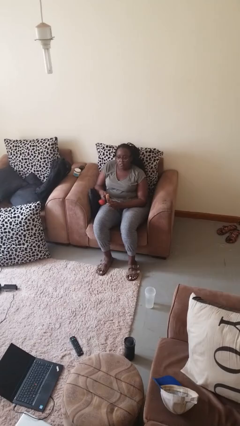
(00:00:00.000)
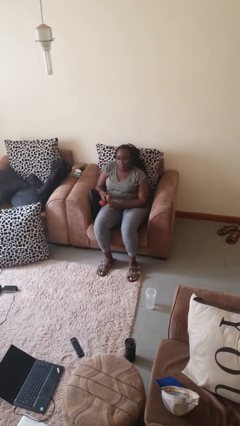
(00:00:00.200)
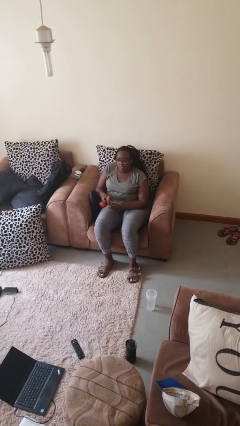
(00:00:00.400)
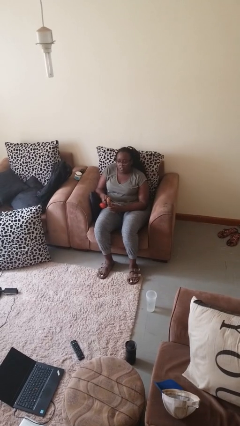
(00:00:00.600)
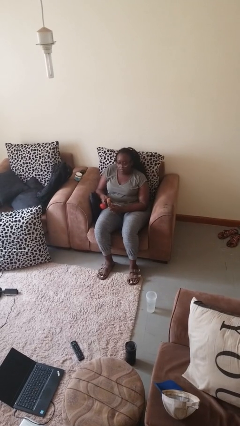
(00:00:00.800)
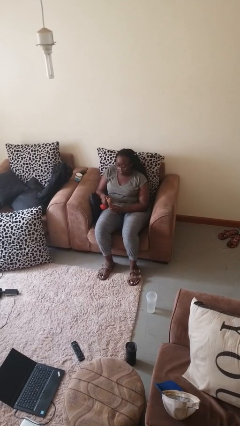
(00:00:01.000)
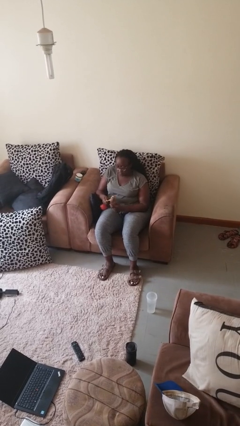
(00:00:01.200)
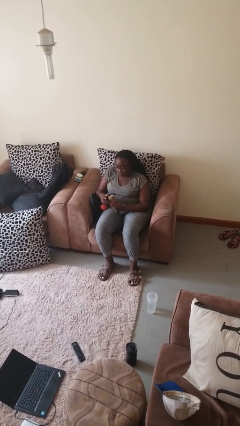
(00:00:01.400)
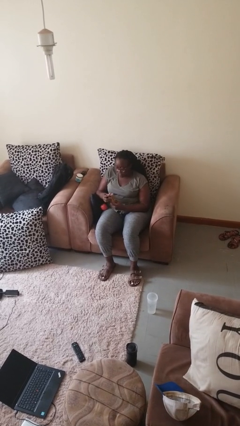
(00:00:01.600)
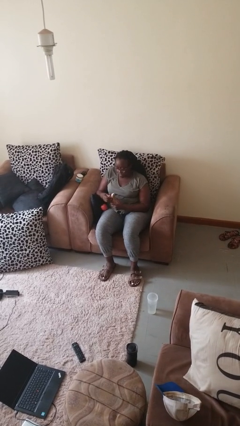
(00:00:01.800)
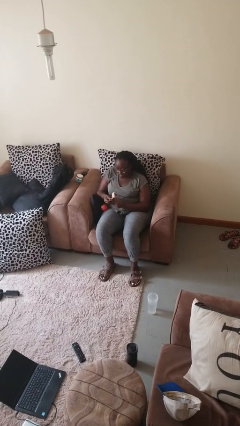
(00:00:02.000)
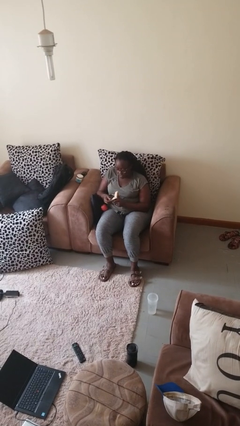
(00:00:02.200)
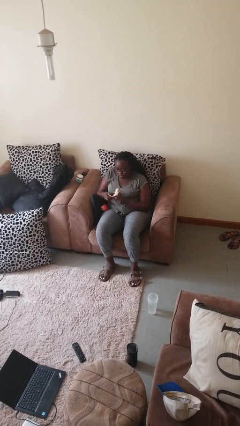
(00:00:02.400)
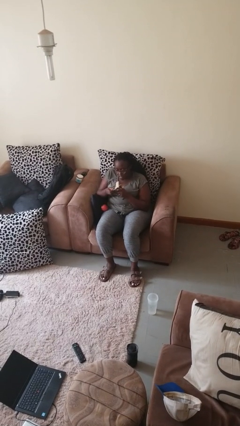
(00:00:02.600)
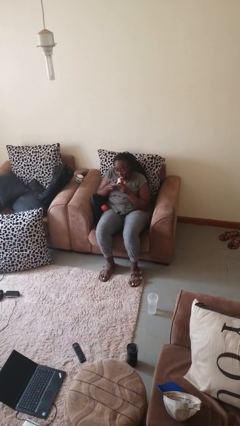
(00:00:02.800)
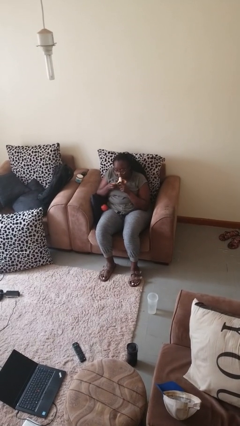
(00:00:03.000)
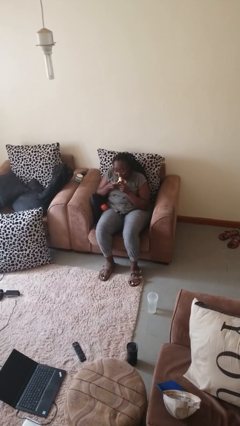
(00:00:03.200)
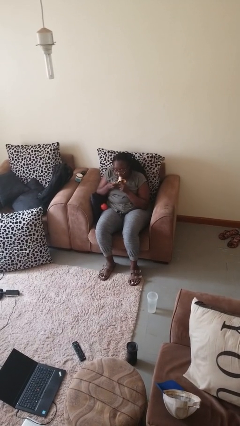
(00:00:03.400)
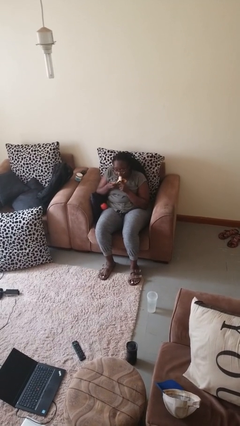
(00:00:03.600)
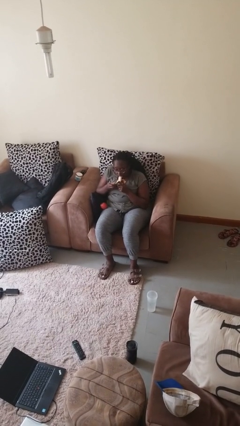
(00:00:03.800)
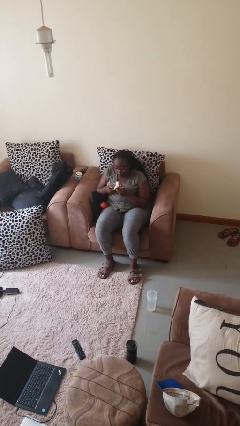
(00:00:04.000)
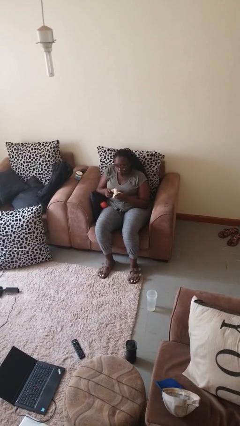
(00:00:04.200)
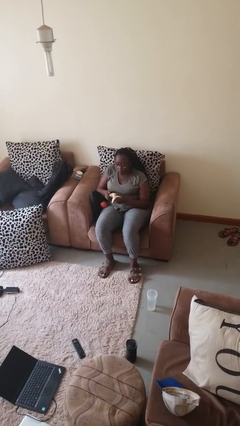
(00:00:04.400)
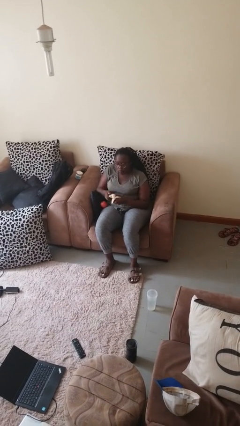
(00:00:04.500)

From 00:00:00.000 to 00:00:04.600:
person eats banana

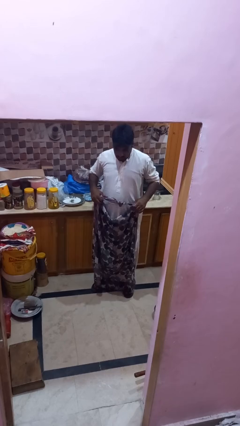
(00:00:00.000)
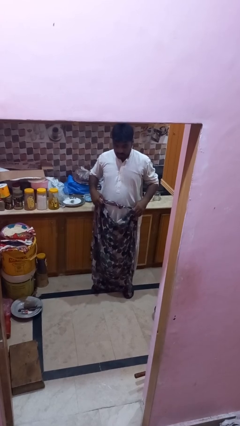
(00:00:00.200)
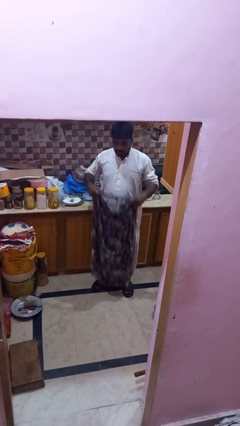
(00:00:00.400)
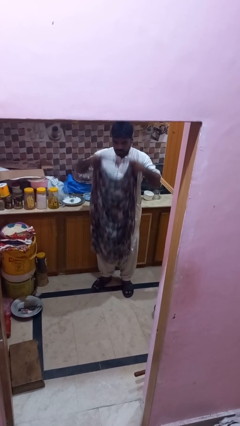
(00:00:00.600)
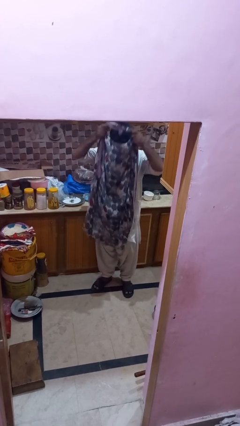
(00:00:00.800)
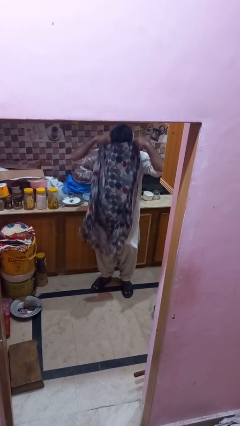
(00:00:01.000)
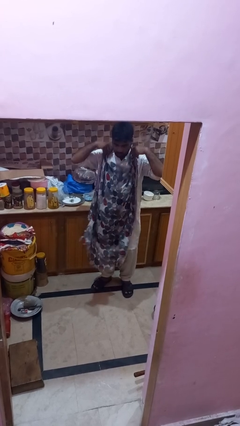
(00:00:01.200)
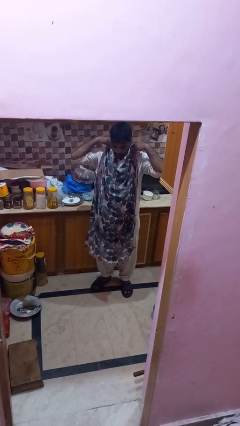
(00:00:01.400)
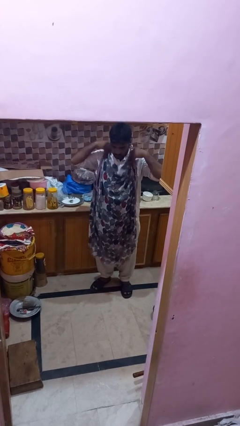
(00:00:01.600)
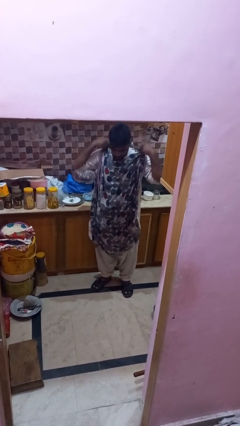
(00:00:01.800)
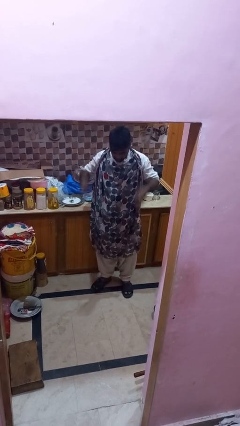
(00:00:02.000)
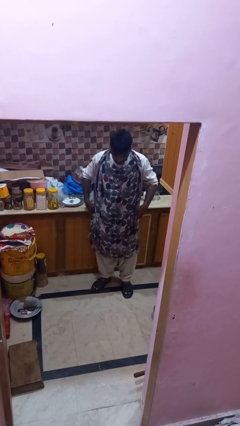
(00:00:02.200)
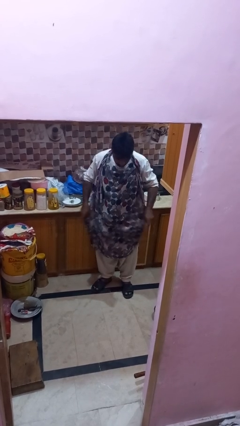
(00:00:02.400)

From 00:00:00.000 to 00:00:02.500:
person puts on apron

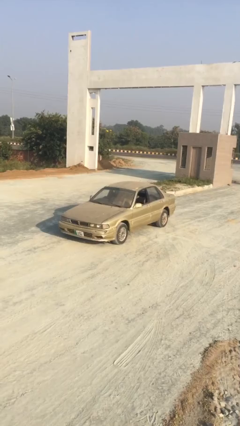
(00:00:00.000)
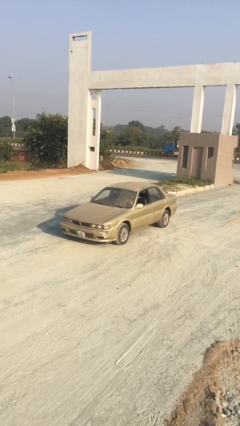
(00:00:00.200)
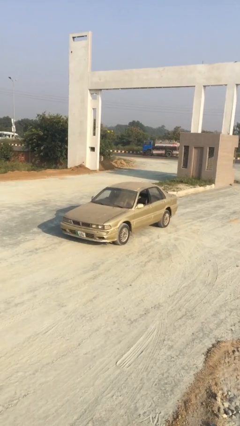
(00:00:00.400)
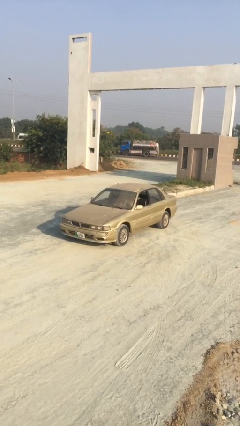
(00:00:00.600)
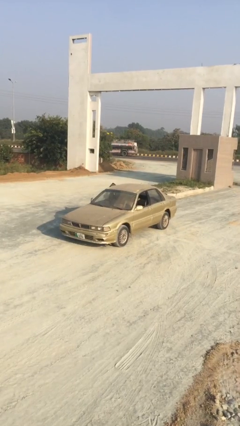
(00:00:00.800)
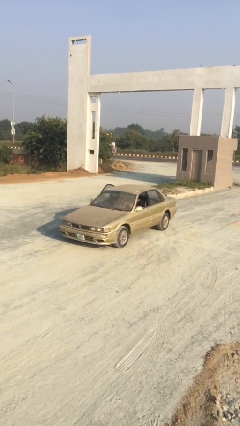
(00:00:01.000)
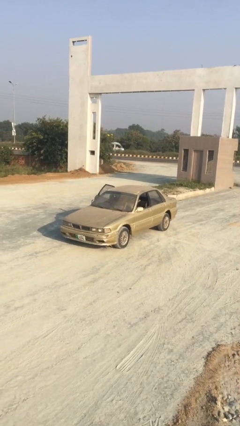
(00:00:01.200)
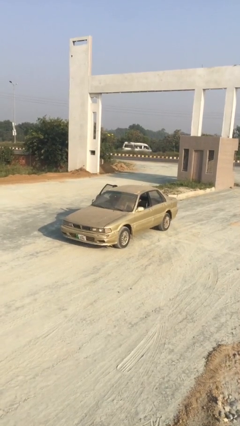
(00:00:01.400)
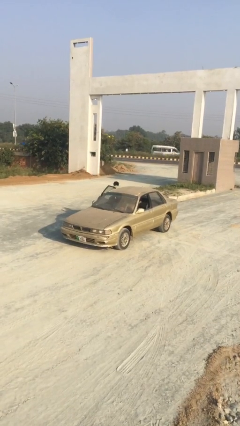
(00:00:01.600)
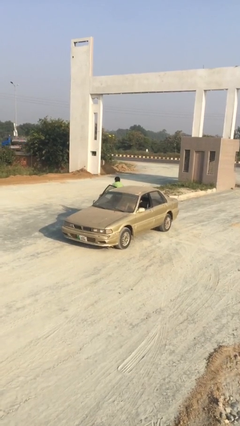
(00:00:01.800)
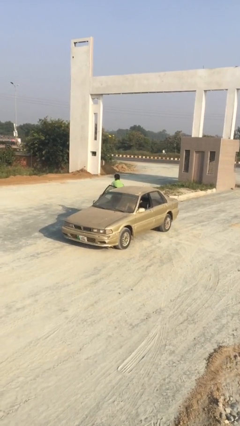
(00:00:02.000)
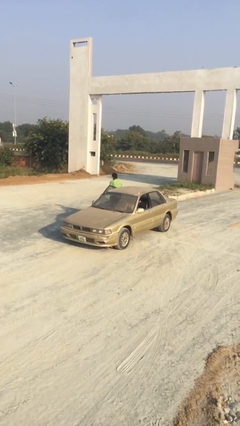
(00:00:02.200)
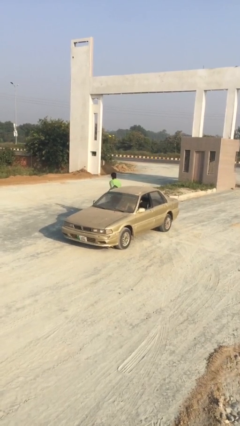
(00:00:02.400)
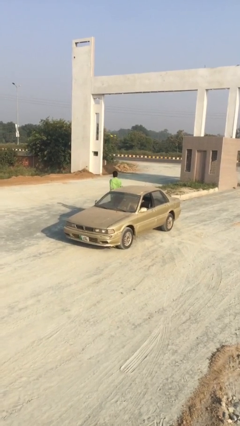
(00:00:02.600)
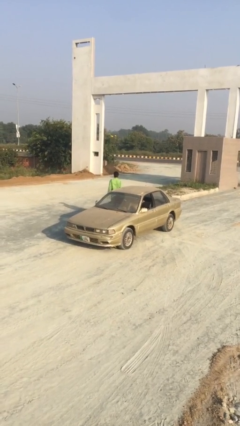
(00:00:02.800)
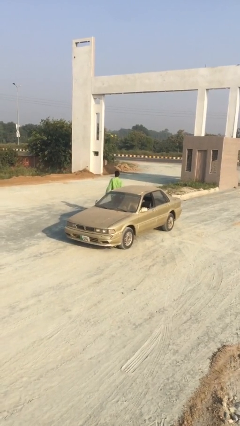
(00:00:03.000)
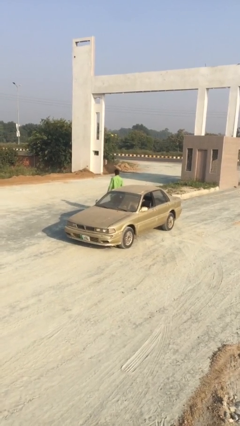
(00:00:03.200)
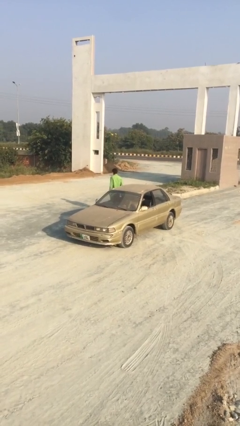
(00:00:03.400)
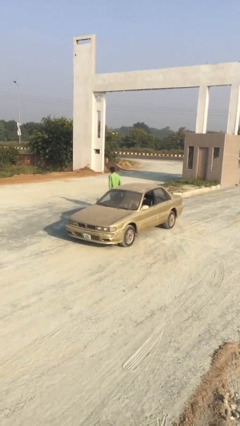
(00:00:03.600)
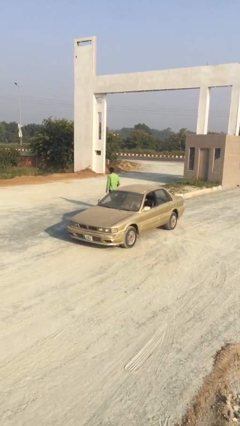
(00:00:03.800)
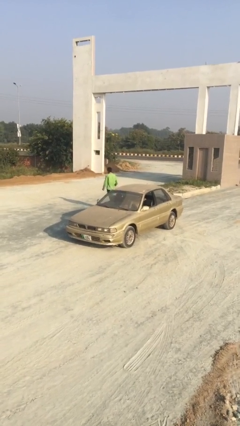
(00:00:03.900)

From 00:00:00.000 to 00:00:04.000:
car drops off person

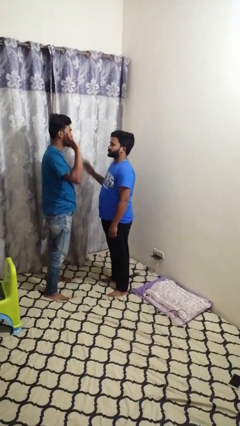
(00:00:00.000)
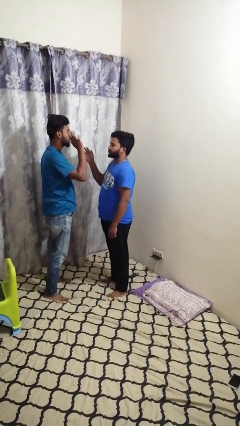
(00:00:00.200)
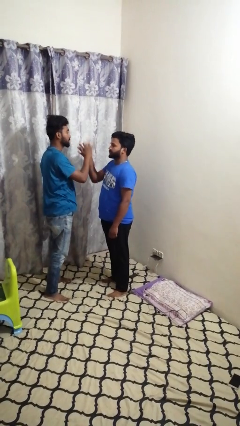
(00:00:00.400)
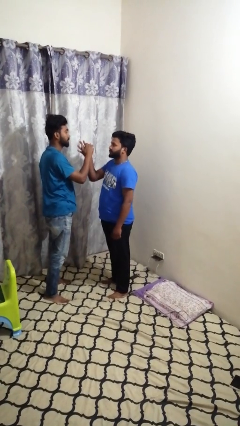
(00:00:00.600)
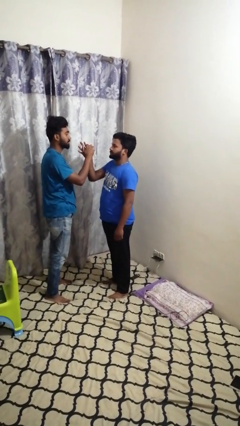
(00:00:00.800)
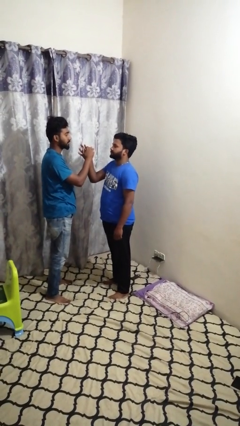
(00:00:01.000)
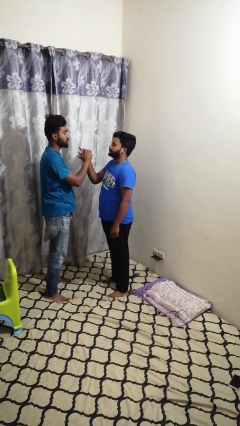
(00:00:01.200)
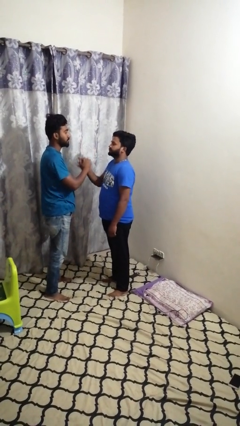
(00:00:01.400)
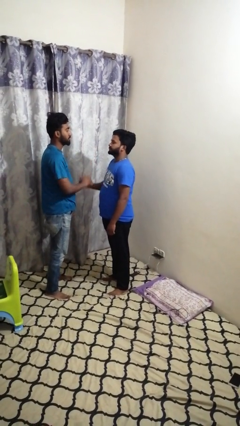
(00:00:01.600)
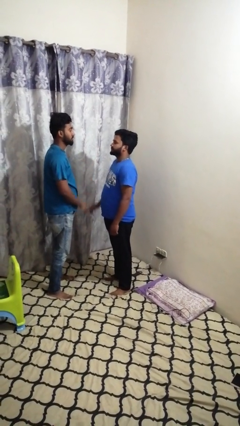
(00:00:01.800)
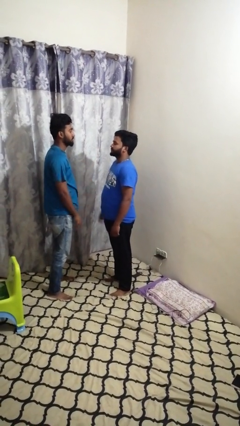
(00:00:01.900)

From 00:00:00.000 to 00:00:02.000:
person highfives hand

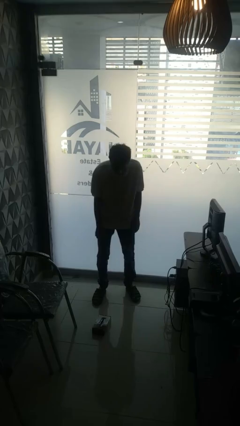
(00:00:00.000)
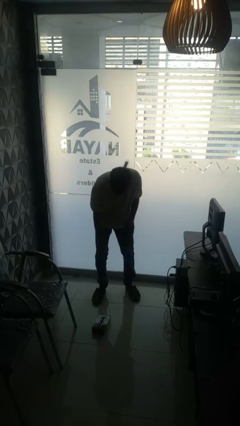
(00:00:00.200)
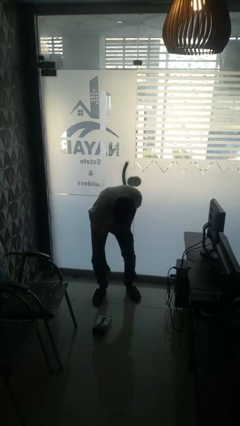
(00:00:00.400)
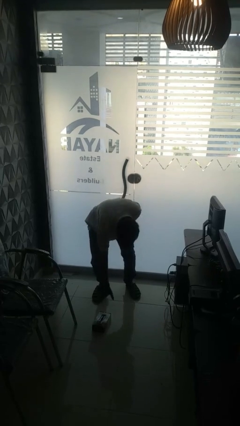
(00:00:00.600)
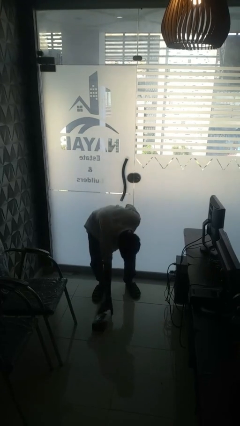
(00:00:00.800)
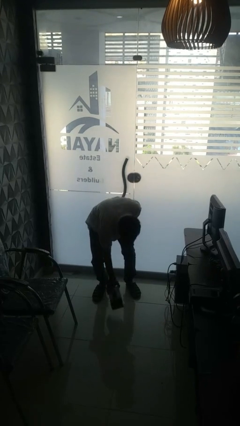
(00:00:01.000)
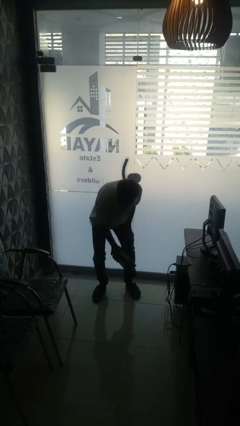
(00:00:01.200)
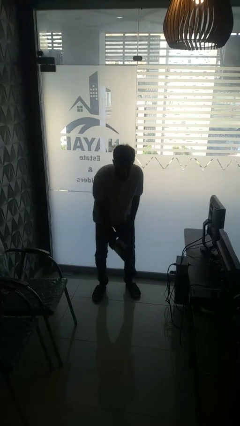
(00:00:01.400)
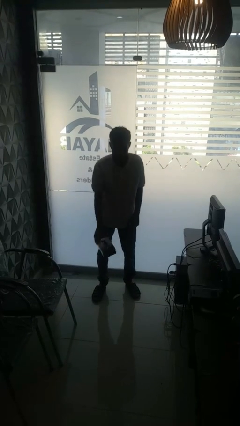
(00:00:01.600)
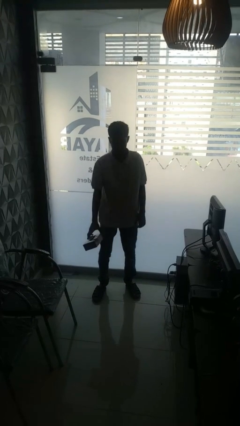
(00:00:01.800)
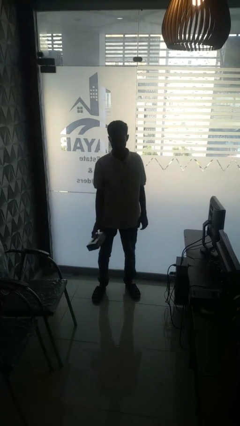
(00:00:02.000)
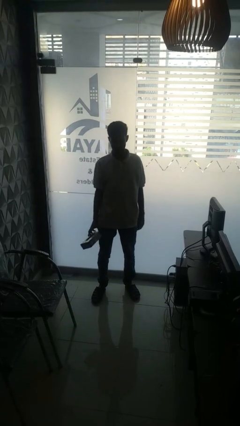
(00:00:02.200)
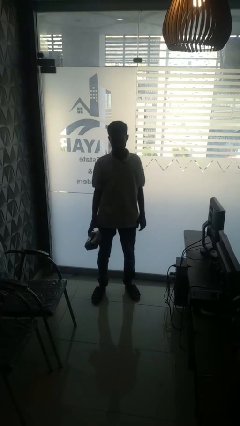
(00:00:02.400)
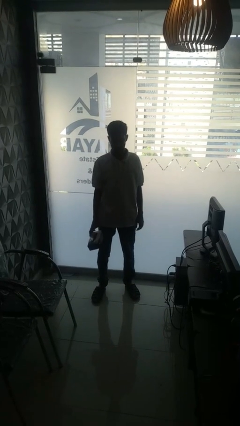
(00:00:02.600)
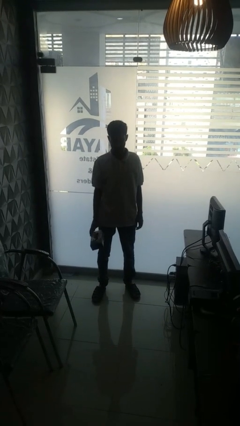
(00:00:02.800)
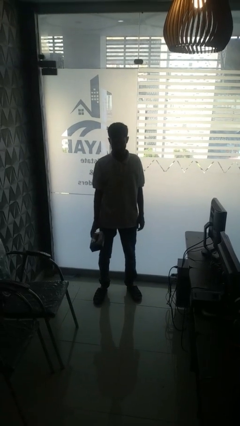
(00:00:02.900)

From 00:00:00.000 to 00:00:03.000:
person picks up object from floor

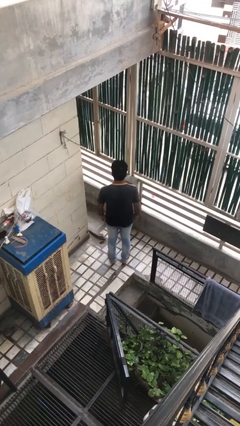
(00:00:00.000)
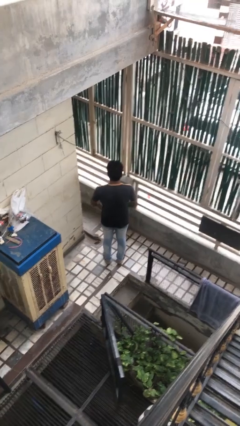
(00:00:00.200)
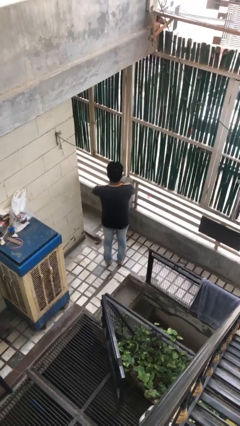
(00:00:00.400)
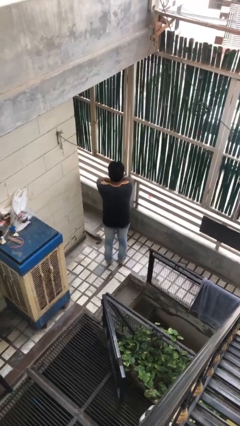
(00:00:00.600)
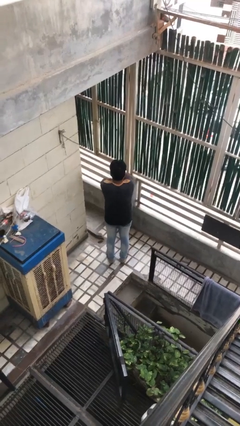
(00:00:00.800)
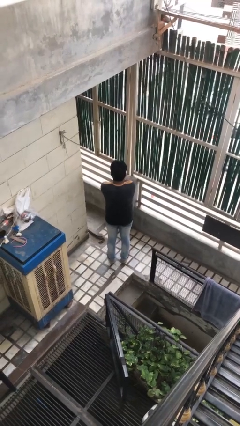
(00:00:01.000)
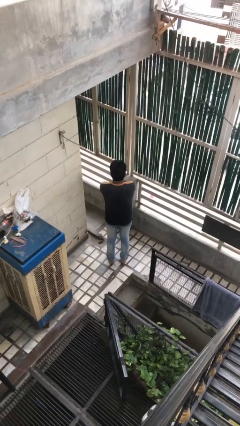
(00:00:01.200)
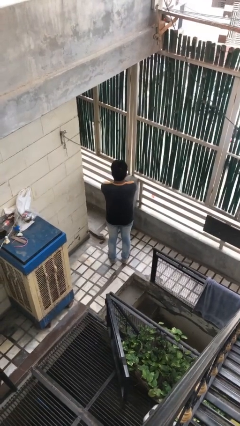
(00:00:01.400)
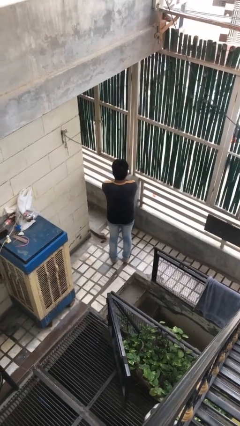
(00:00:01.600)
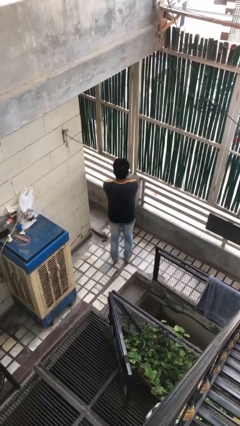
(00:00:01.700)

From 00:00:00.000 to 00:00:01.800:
person crosses arms
